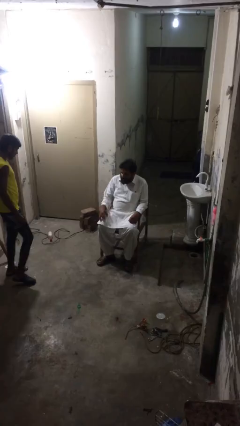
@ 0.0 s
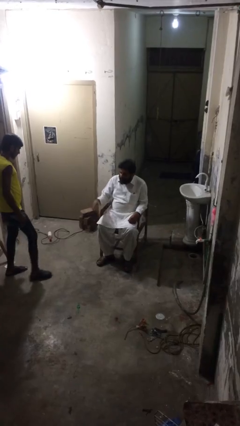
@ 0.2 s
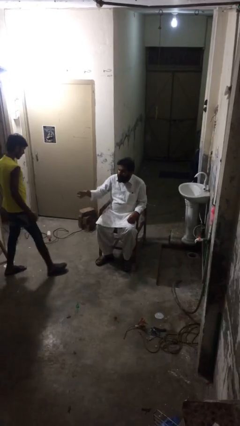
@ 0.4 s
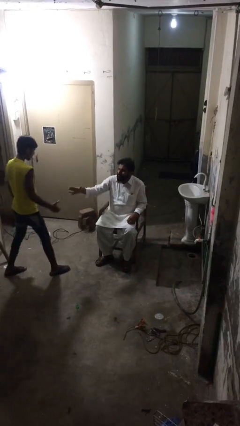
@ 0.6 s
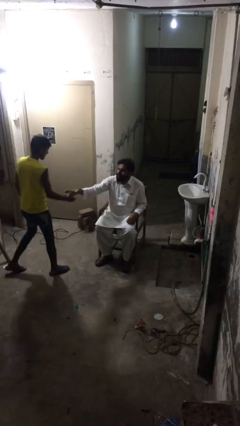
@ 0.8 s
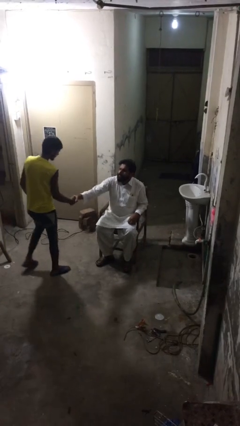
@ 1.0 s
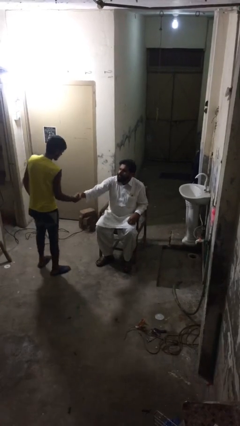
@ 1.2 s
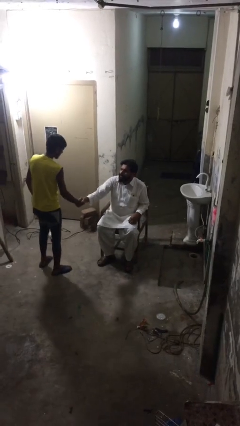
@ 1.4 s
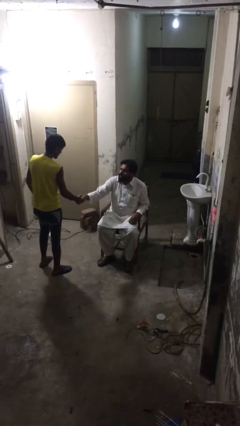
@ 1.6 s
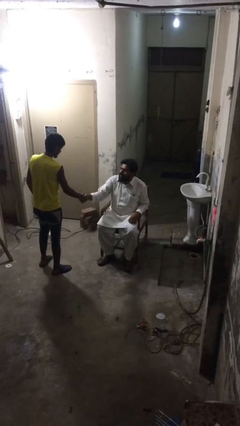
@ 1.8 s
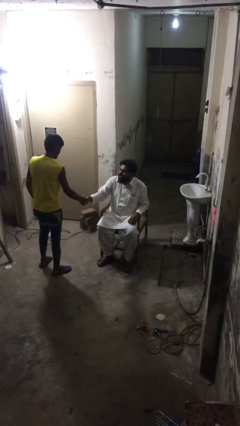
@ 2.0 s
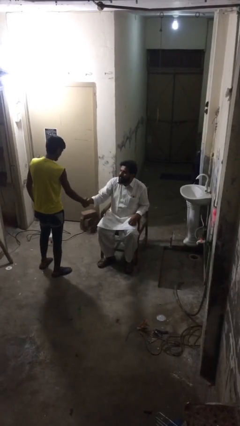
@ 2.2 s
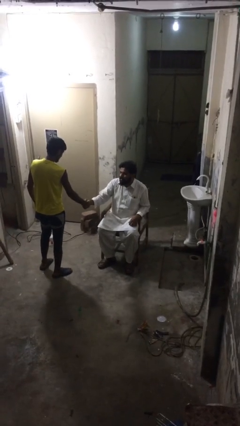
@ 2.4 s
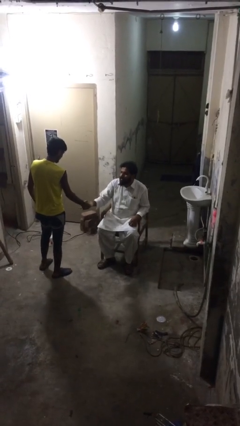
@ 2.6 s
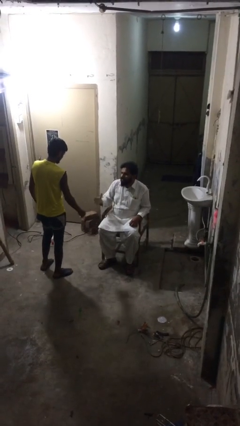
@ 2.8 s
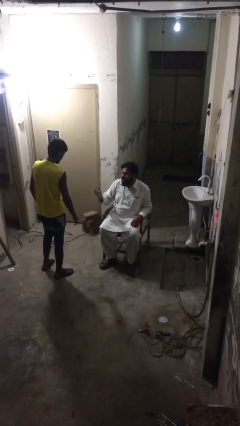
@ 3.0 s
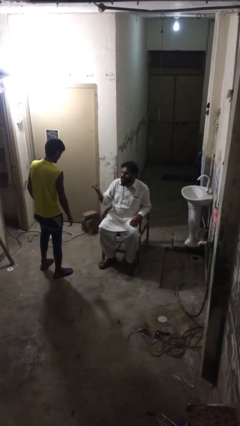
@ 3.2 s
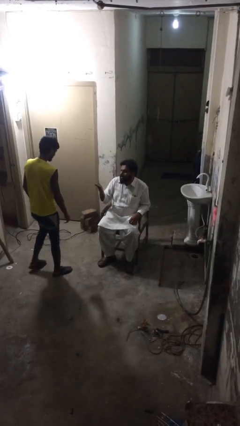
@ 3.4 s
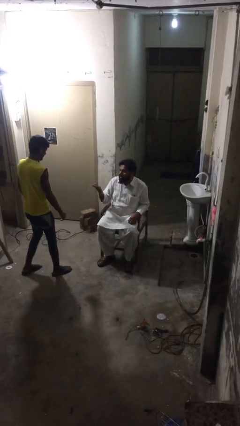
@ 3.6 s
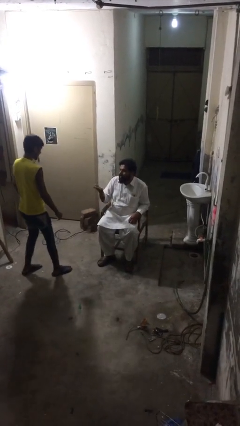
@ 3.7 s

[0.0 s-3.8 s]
person shakes hand

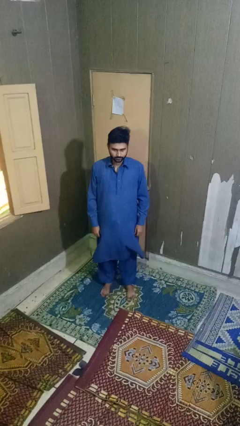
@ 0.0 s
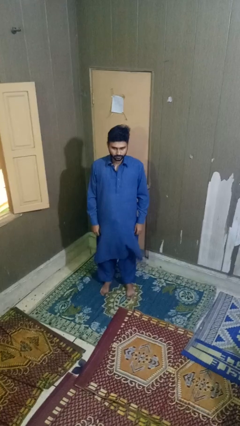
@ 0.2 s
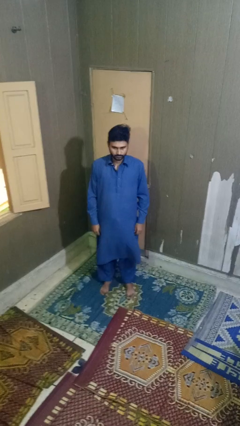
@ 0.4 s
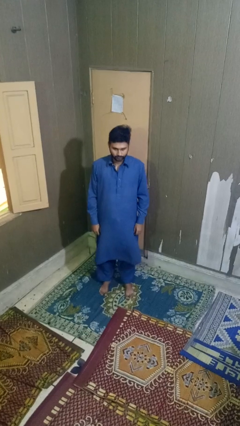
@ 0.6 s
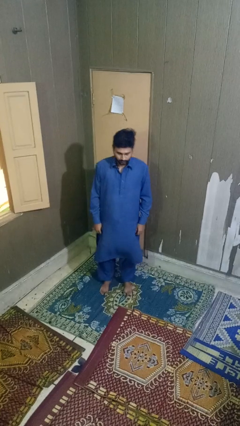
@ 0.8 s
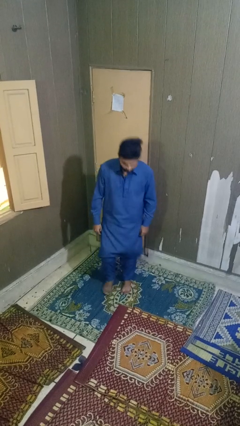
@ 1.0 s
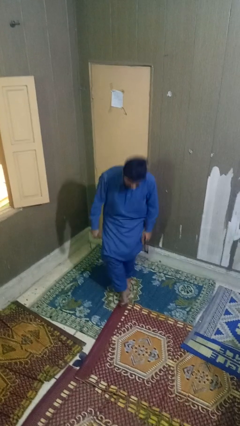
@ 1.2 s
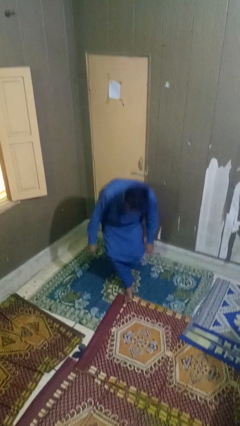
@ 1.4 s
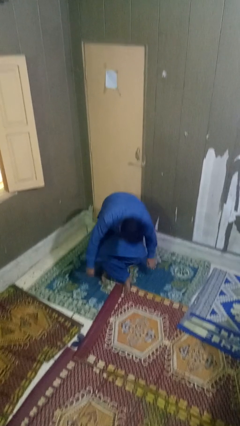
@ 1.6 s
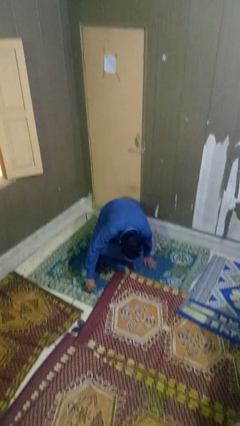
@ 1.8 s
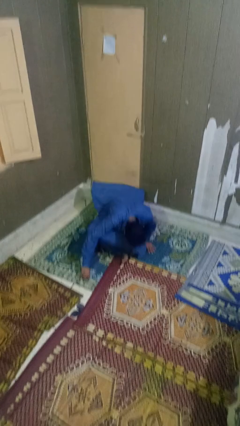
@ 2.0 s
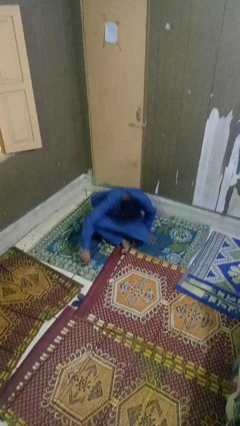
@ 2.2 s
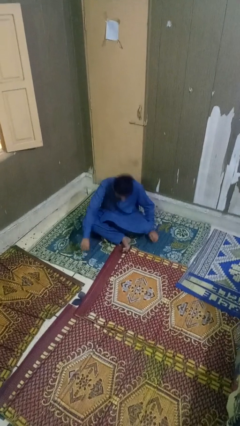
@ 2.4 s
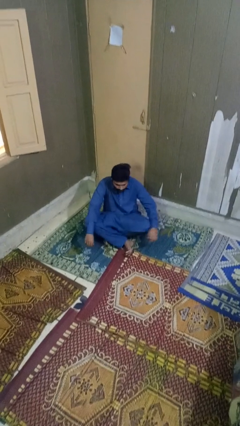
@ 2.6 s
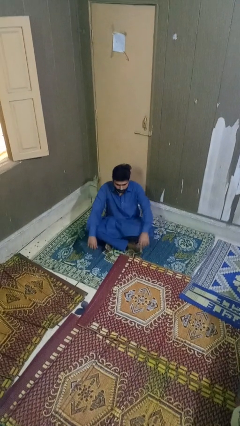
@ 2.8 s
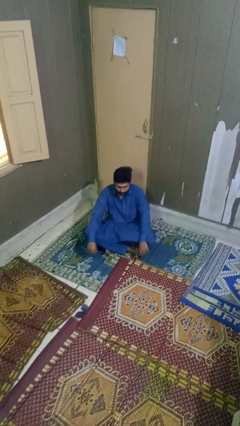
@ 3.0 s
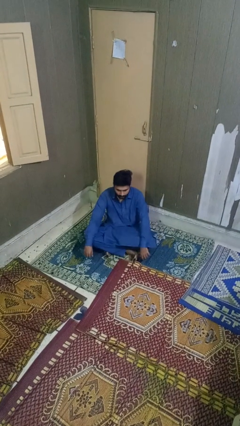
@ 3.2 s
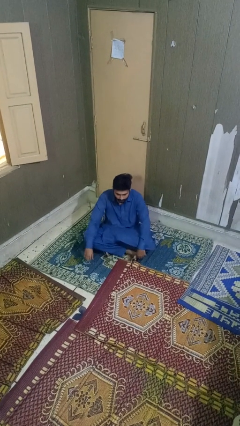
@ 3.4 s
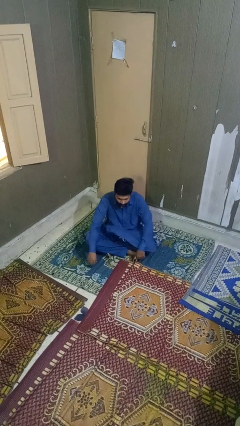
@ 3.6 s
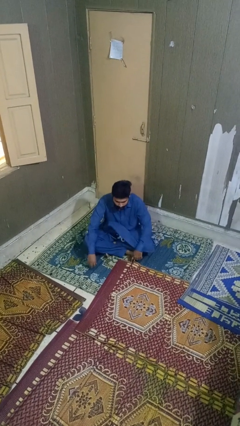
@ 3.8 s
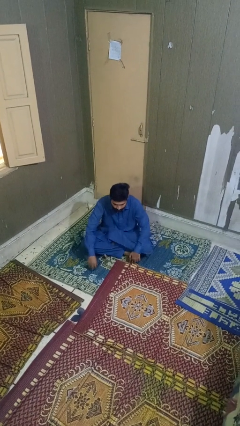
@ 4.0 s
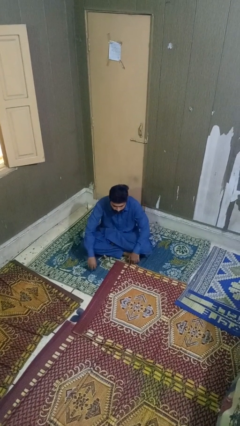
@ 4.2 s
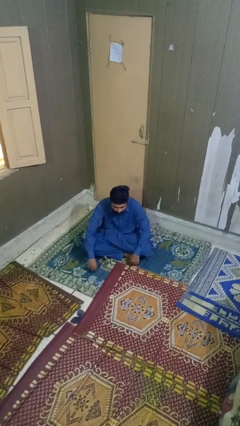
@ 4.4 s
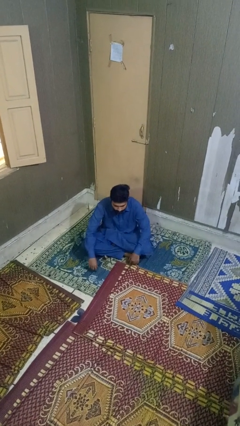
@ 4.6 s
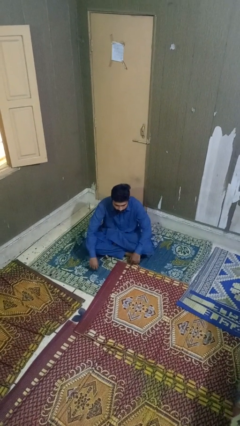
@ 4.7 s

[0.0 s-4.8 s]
person sits crisscross

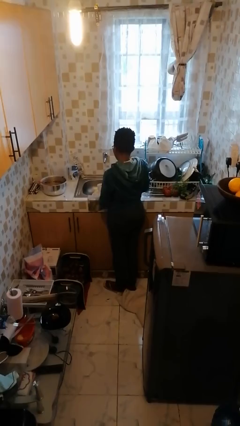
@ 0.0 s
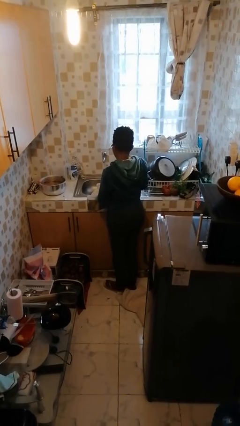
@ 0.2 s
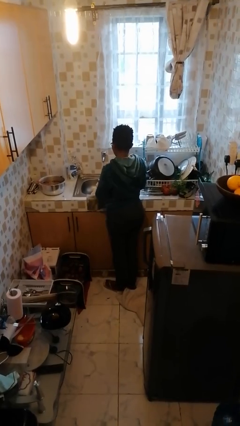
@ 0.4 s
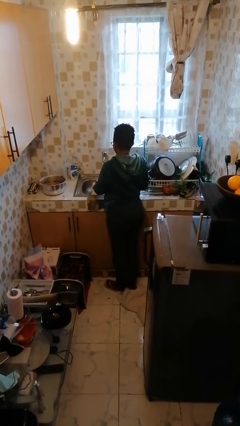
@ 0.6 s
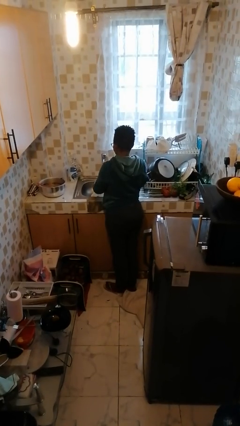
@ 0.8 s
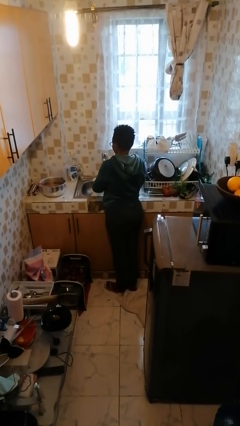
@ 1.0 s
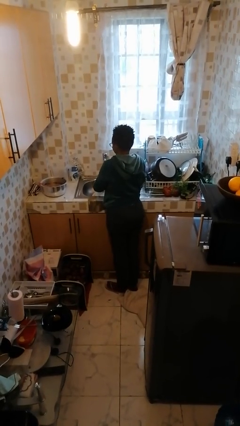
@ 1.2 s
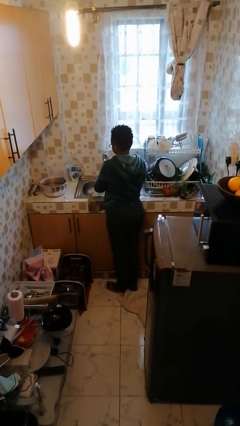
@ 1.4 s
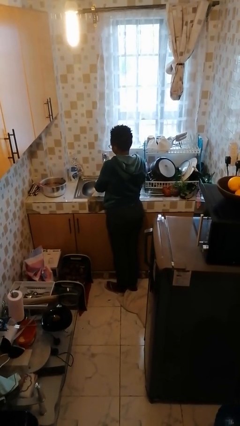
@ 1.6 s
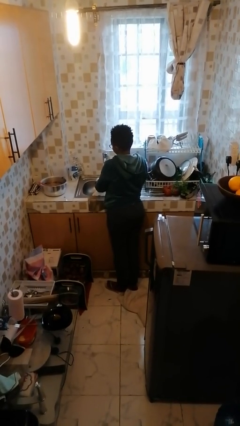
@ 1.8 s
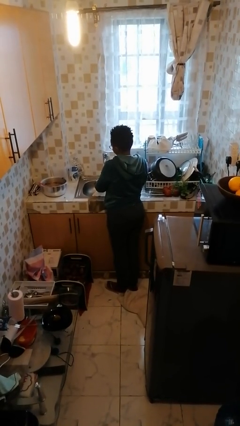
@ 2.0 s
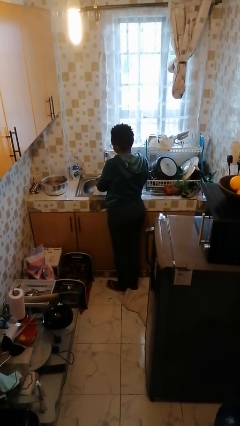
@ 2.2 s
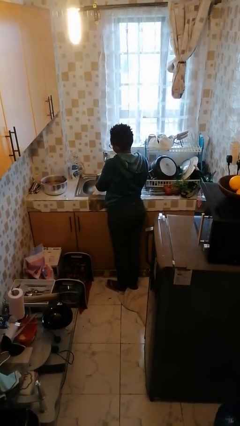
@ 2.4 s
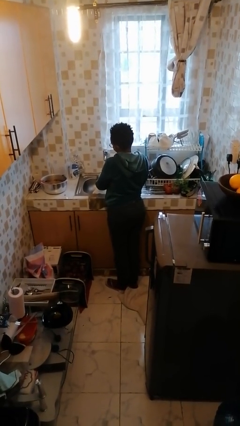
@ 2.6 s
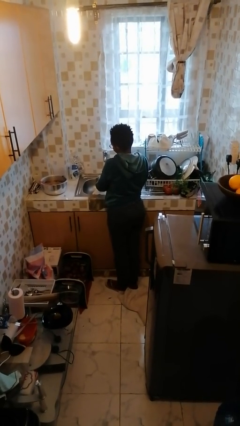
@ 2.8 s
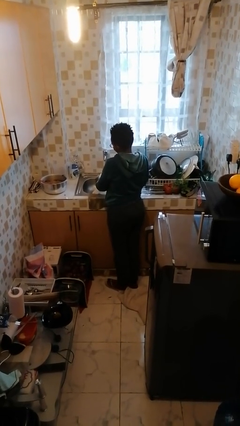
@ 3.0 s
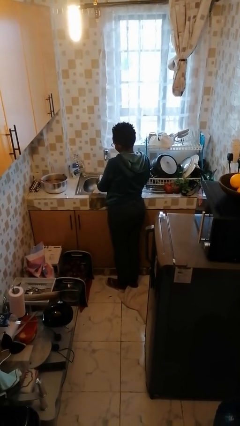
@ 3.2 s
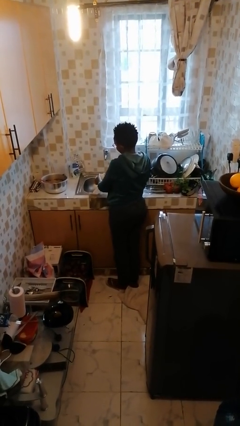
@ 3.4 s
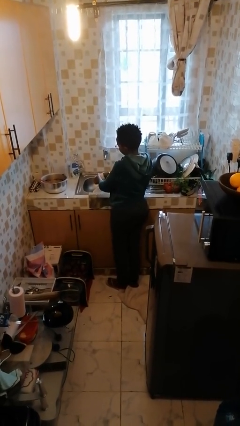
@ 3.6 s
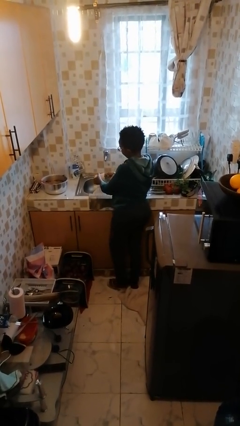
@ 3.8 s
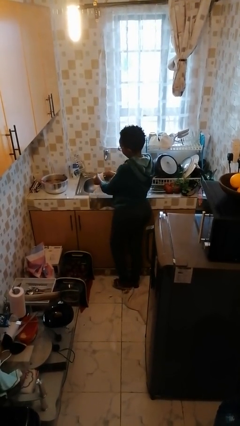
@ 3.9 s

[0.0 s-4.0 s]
person washes dish

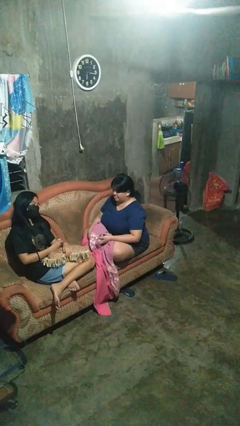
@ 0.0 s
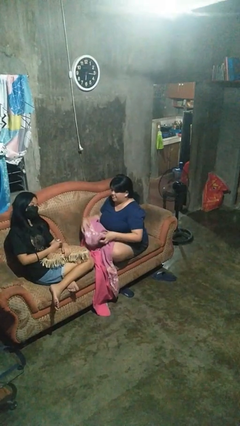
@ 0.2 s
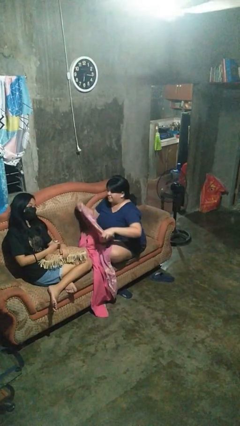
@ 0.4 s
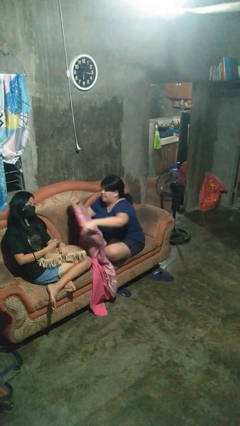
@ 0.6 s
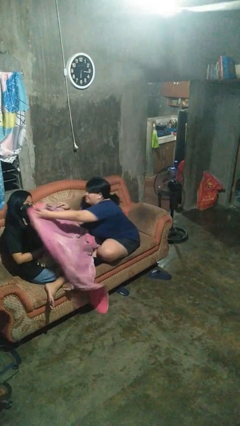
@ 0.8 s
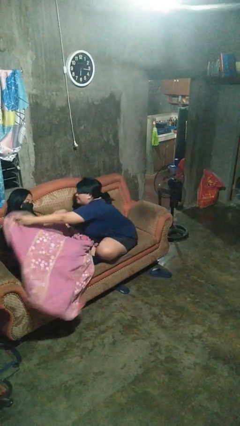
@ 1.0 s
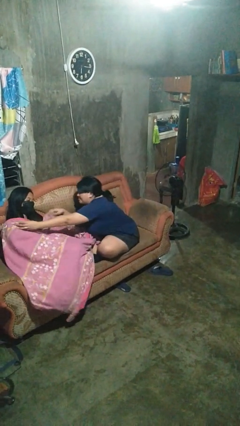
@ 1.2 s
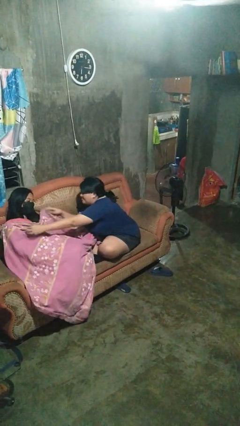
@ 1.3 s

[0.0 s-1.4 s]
person covers friend with blanket

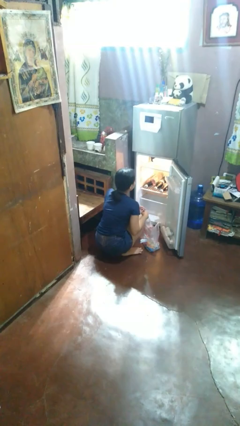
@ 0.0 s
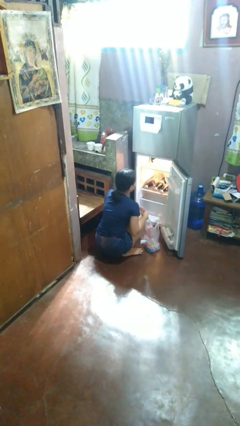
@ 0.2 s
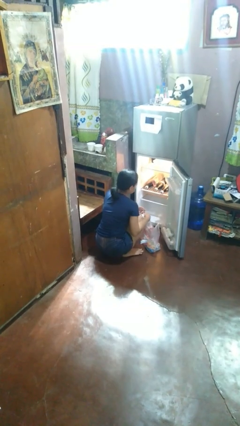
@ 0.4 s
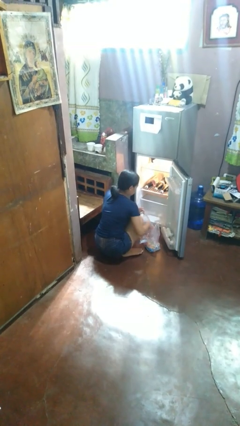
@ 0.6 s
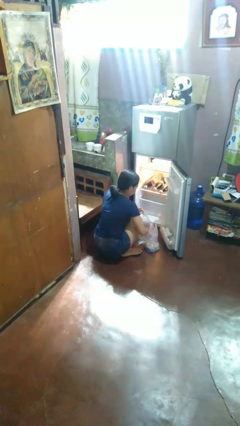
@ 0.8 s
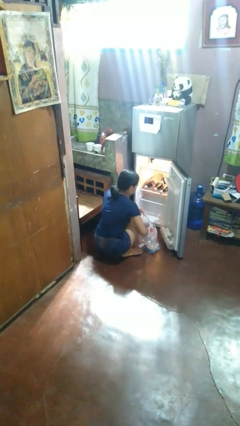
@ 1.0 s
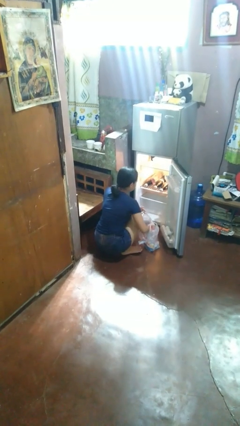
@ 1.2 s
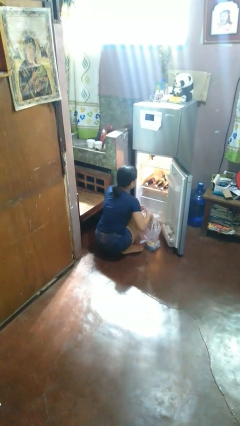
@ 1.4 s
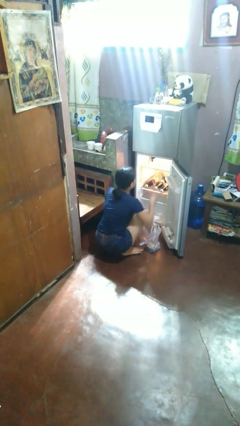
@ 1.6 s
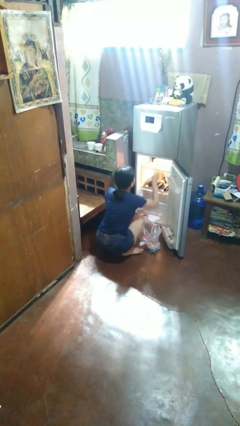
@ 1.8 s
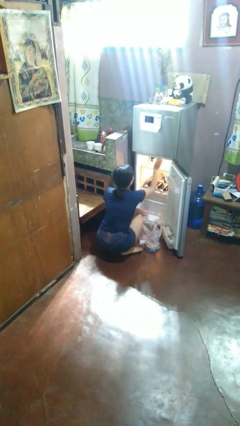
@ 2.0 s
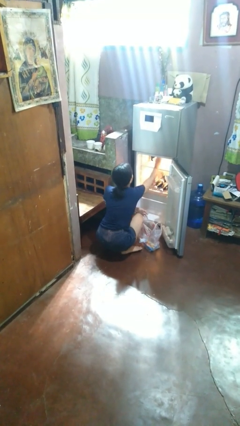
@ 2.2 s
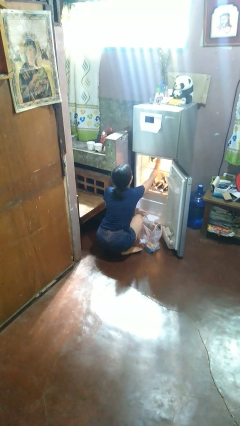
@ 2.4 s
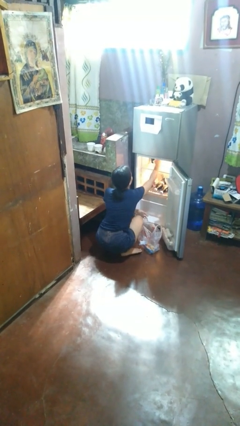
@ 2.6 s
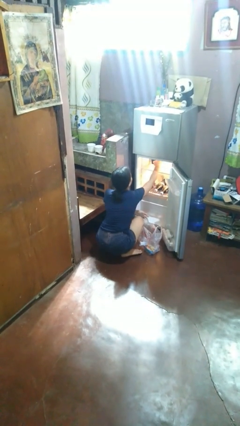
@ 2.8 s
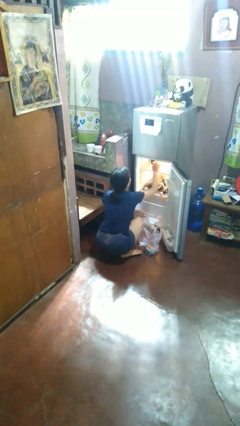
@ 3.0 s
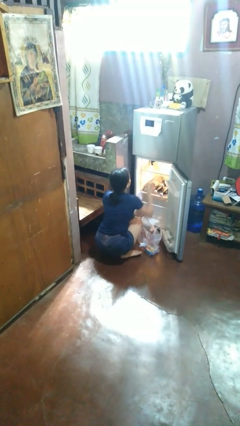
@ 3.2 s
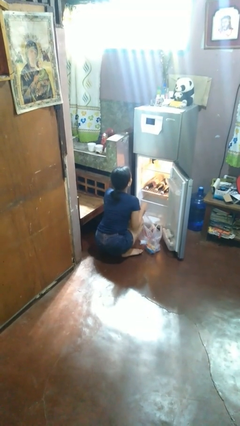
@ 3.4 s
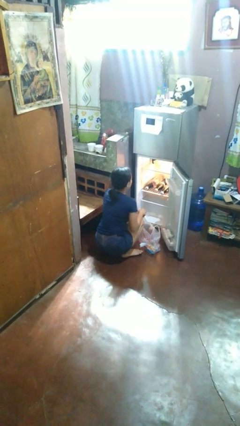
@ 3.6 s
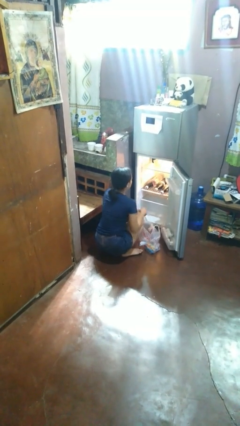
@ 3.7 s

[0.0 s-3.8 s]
person loads groceries into refrigerator
